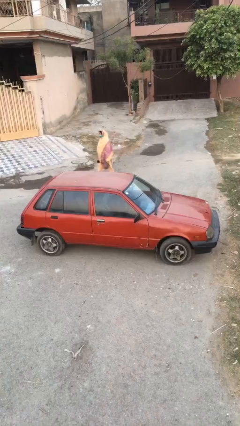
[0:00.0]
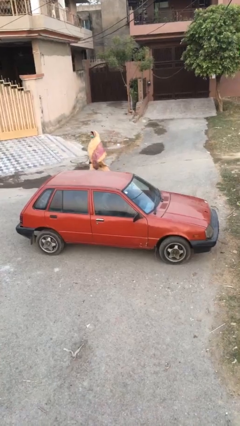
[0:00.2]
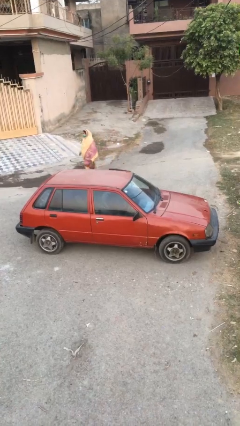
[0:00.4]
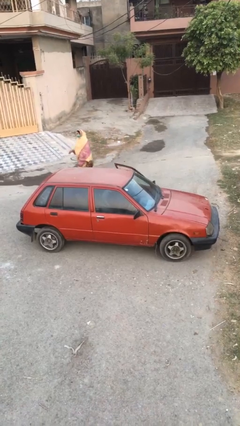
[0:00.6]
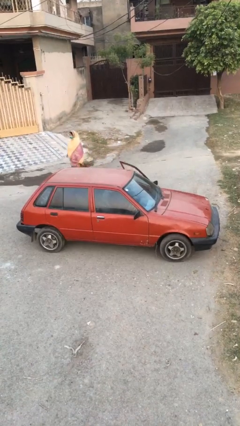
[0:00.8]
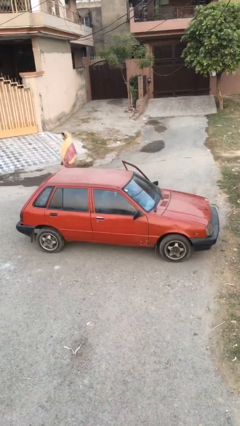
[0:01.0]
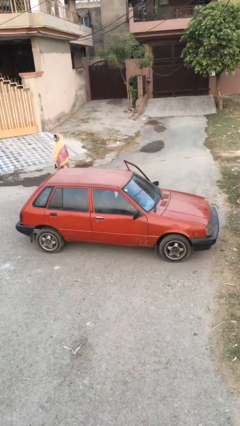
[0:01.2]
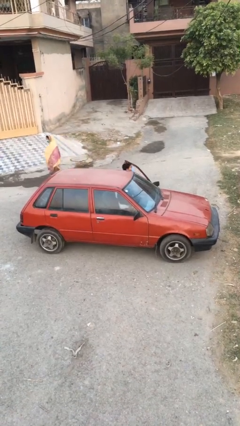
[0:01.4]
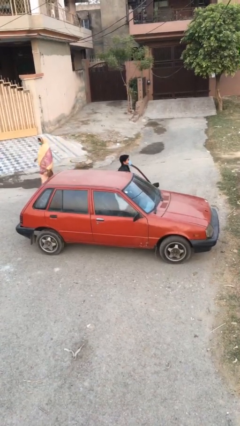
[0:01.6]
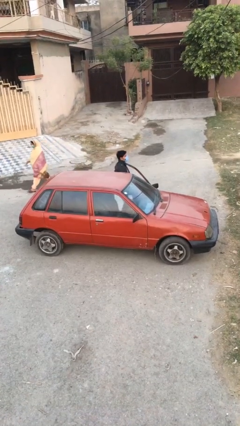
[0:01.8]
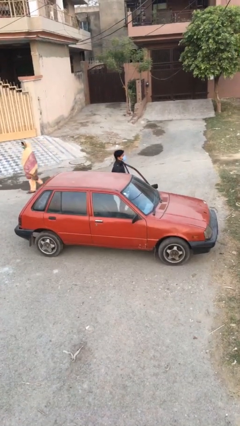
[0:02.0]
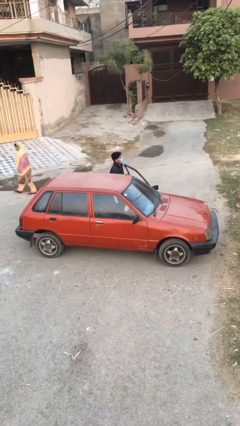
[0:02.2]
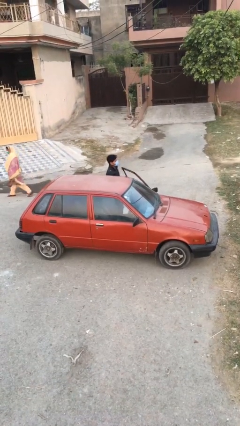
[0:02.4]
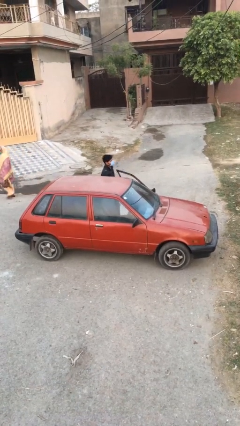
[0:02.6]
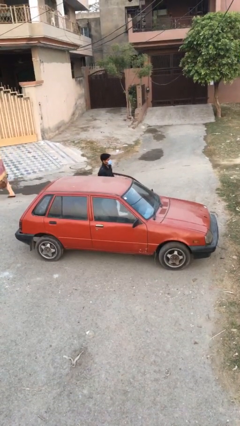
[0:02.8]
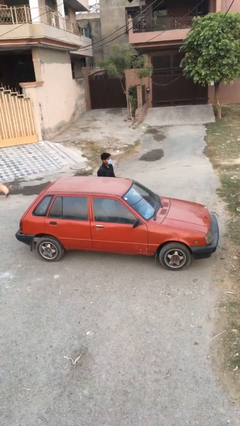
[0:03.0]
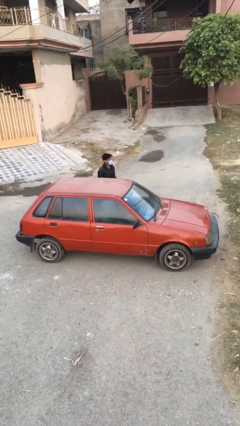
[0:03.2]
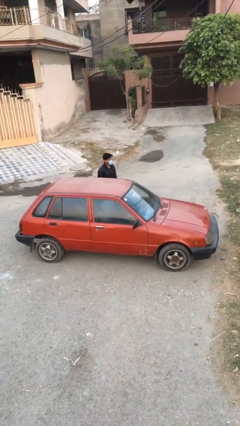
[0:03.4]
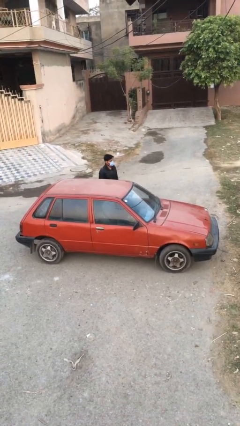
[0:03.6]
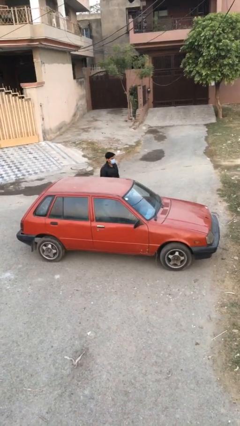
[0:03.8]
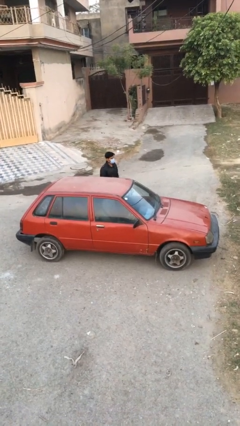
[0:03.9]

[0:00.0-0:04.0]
car drops off person

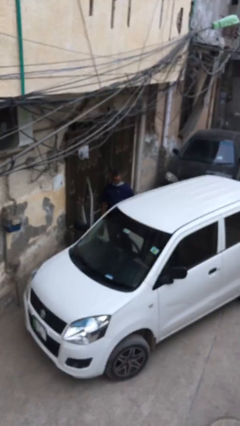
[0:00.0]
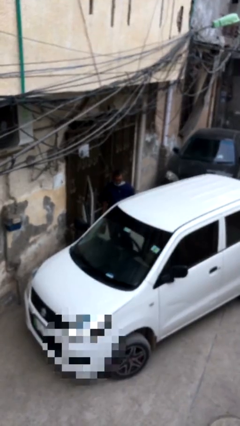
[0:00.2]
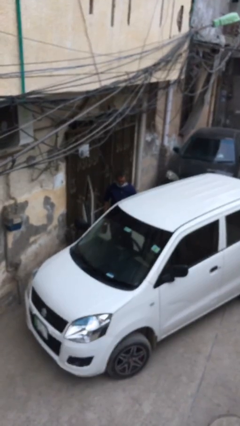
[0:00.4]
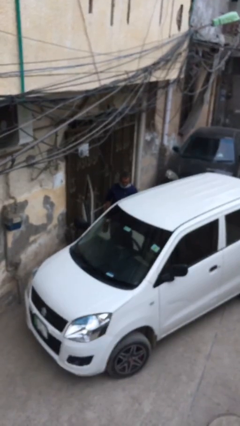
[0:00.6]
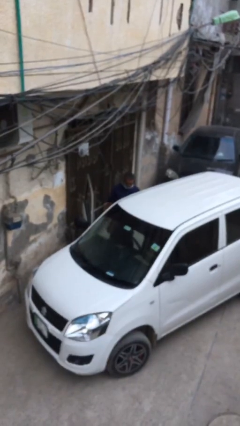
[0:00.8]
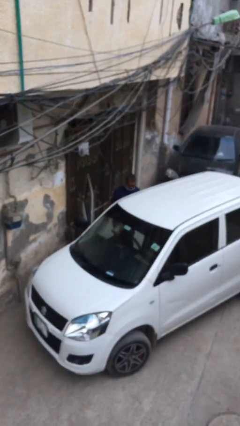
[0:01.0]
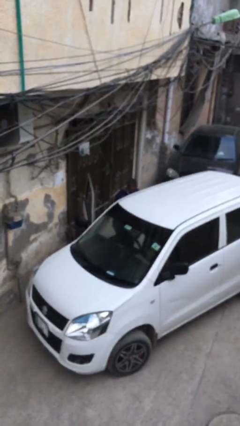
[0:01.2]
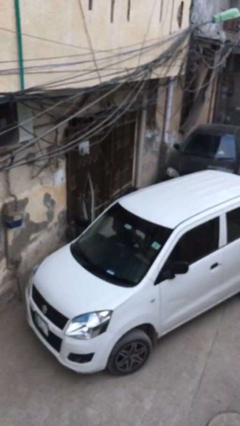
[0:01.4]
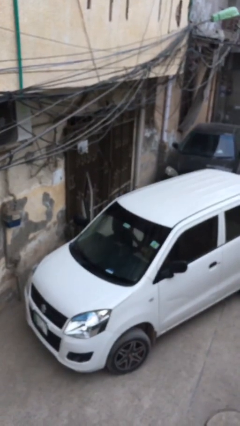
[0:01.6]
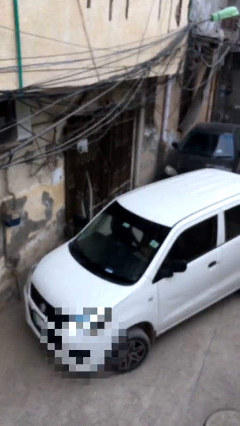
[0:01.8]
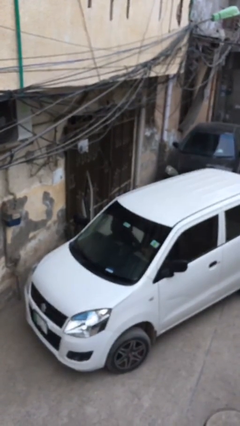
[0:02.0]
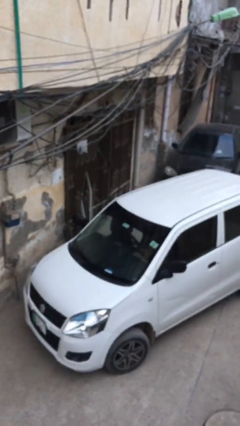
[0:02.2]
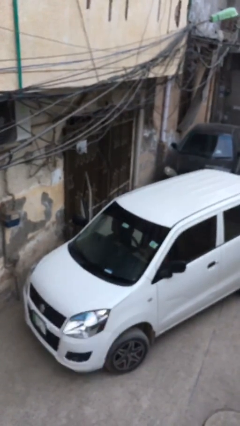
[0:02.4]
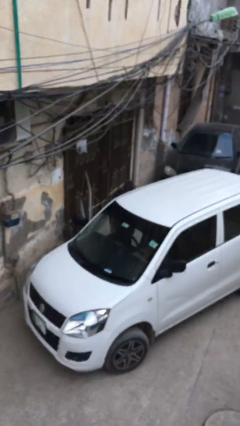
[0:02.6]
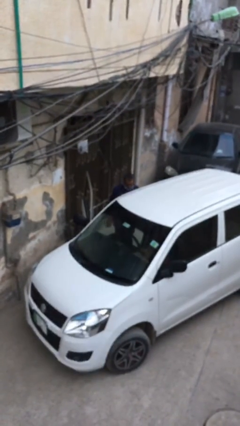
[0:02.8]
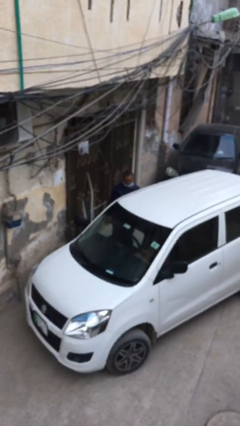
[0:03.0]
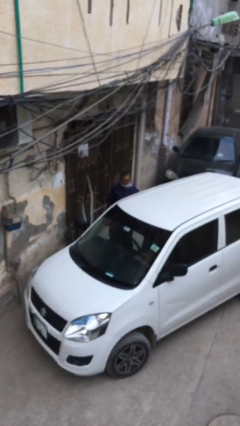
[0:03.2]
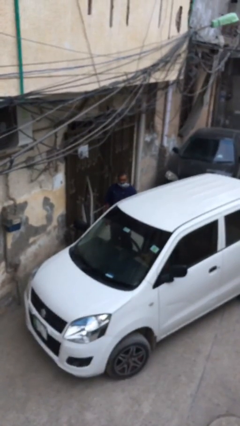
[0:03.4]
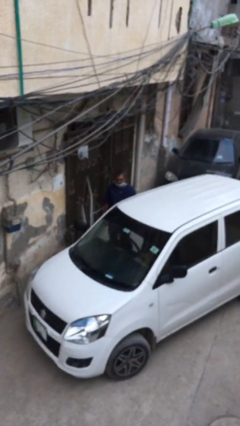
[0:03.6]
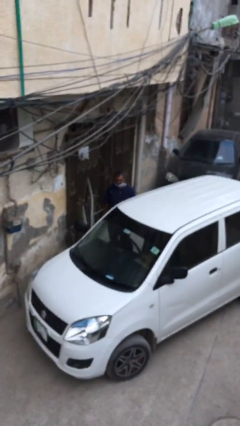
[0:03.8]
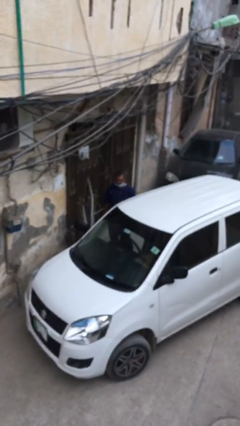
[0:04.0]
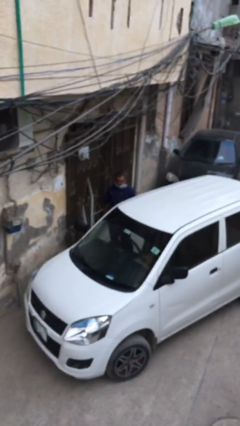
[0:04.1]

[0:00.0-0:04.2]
person loads car

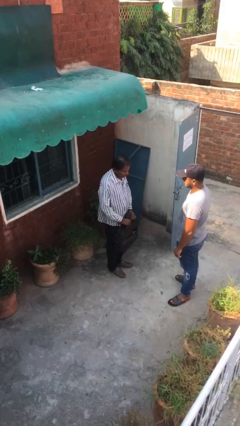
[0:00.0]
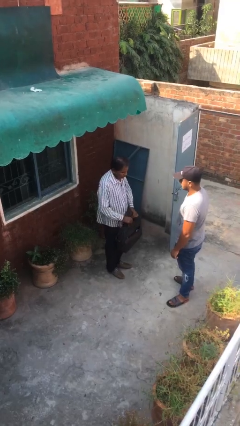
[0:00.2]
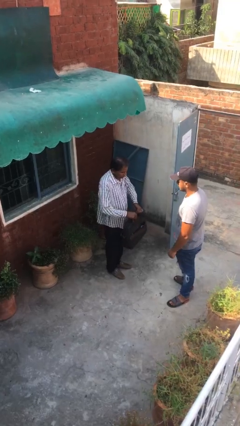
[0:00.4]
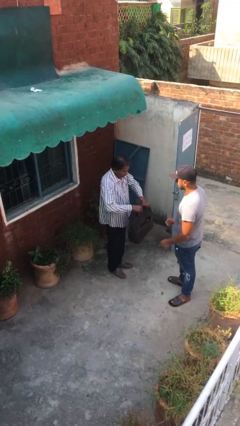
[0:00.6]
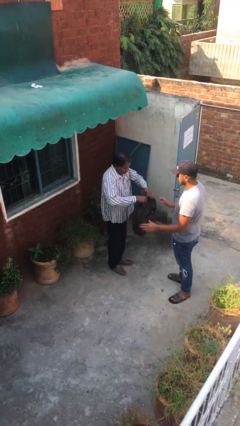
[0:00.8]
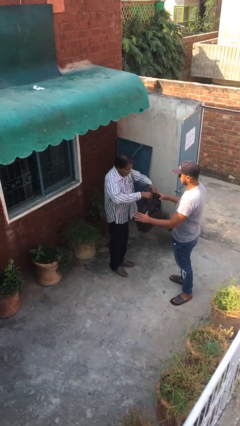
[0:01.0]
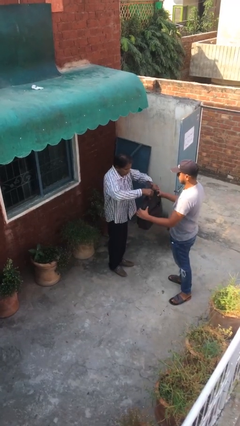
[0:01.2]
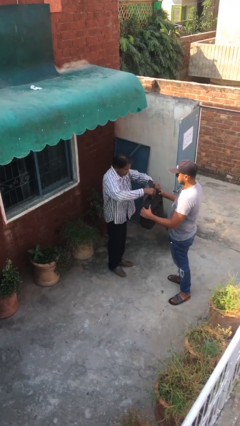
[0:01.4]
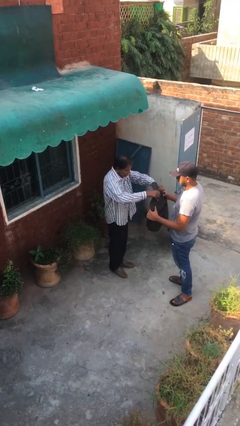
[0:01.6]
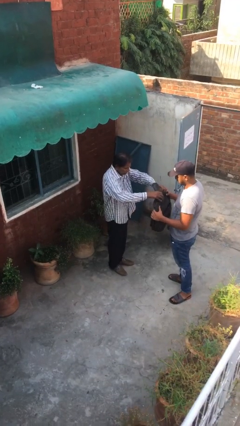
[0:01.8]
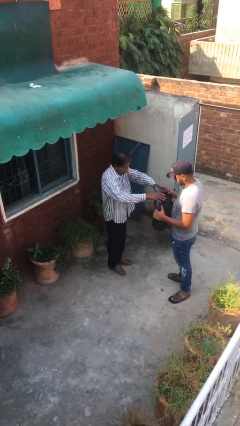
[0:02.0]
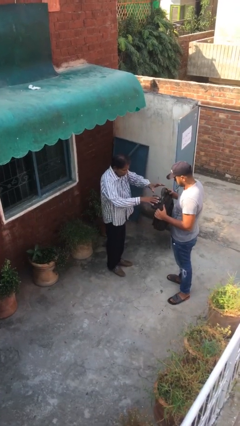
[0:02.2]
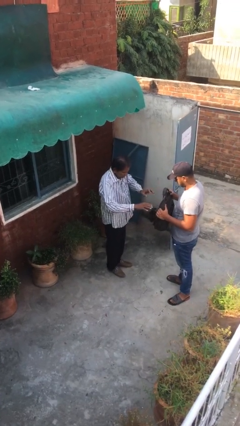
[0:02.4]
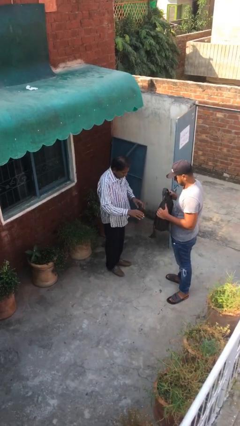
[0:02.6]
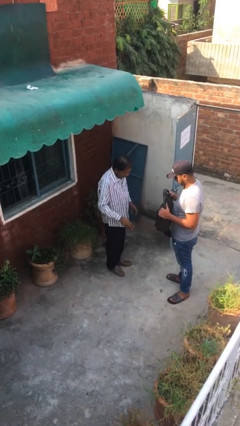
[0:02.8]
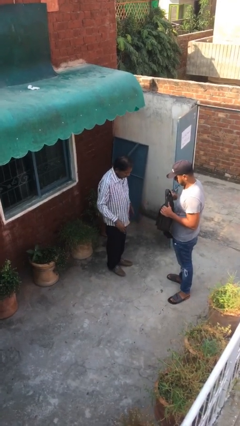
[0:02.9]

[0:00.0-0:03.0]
person transfers object to person

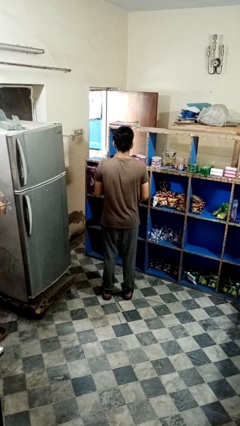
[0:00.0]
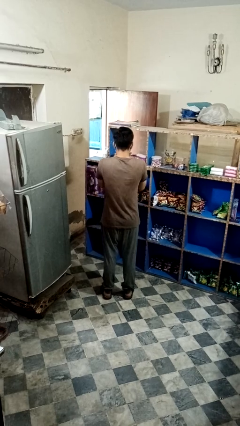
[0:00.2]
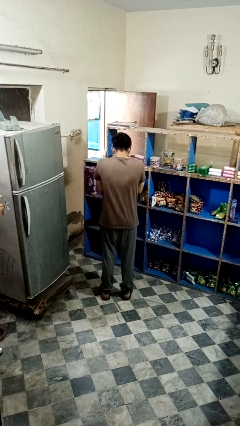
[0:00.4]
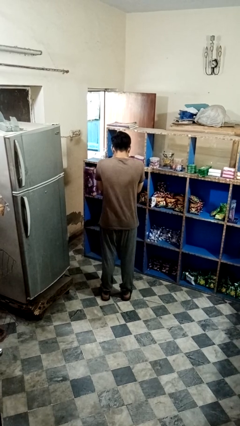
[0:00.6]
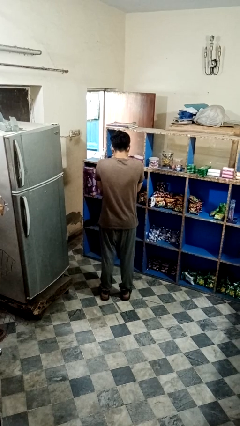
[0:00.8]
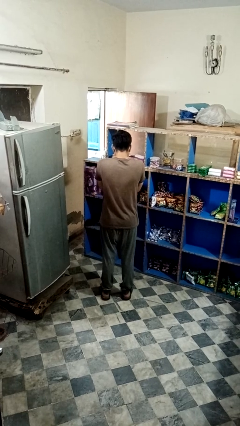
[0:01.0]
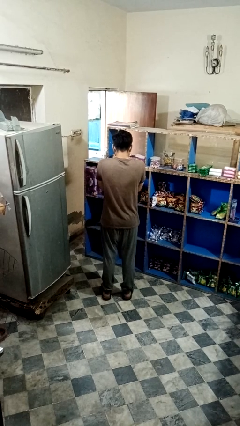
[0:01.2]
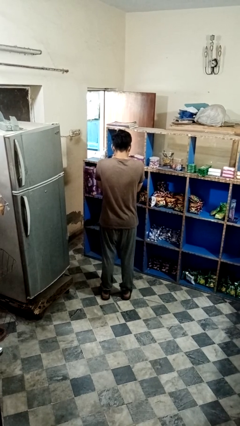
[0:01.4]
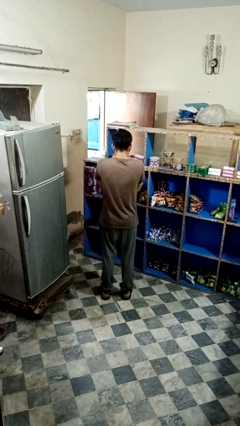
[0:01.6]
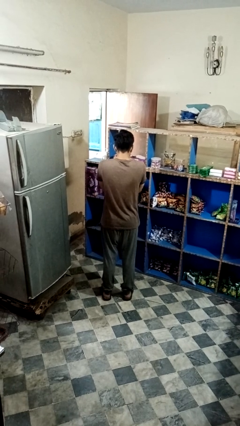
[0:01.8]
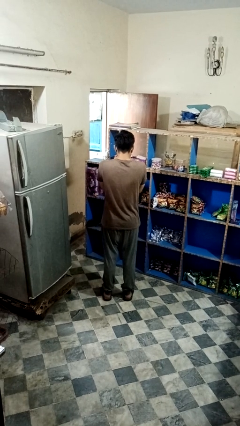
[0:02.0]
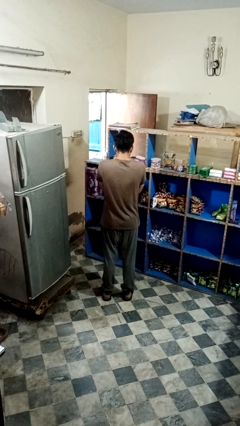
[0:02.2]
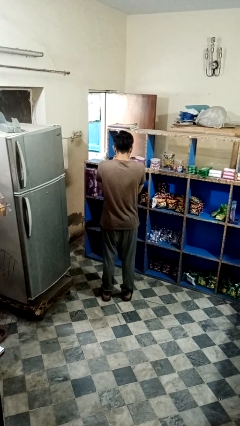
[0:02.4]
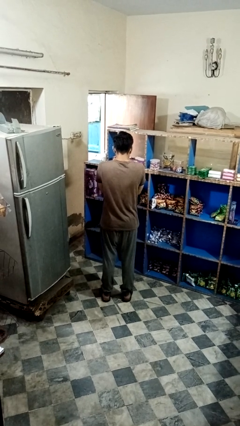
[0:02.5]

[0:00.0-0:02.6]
person sneezes into hand

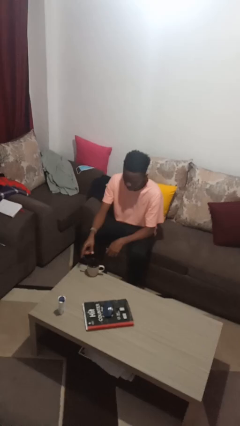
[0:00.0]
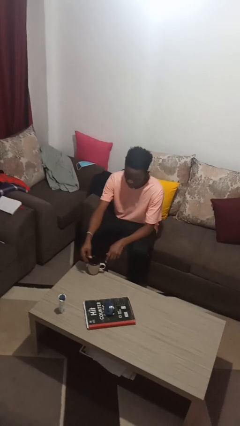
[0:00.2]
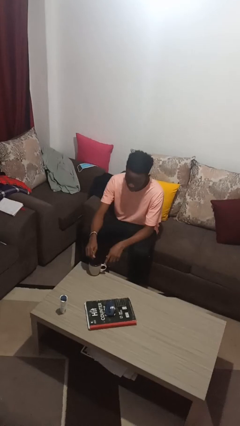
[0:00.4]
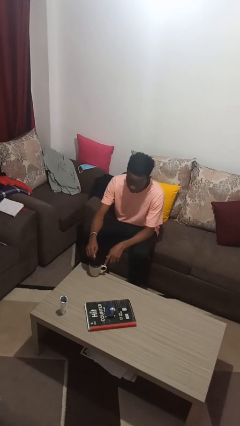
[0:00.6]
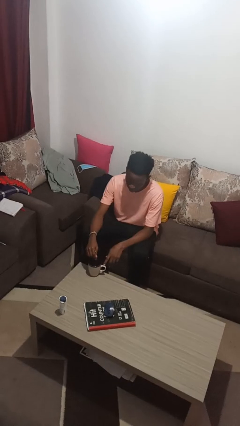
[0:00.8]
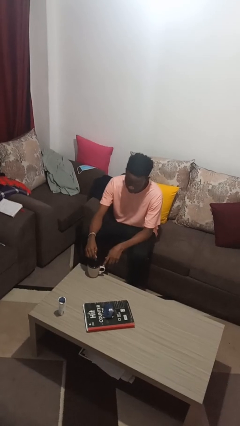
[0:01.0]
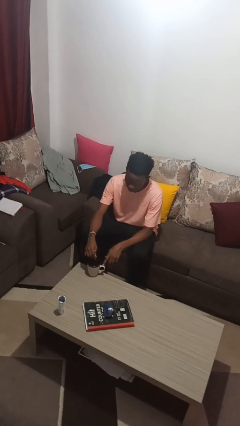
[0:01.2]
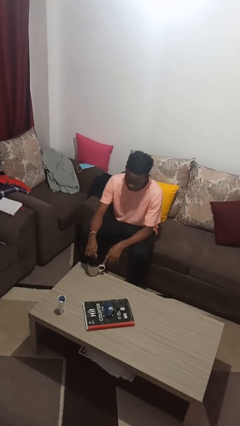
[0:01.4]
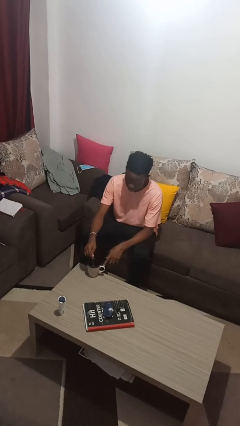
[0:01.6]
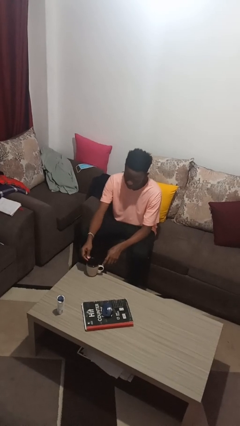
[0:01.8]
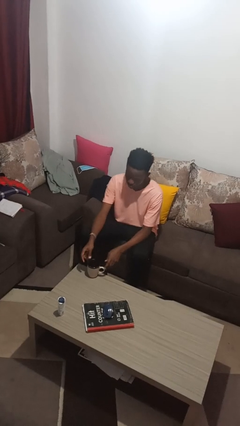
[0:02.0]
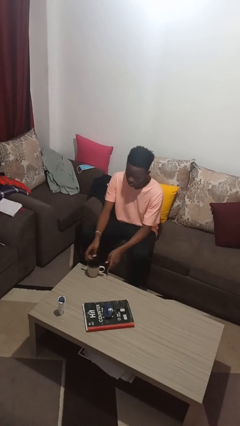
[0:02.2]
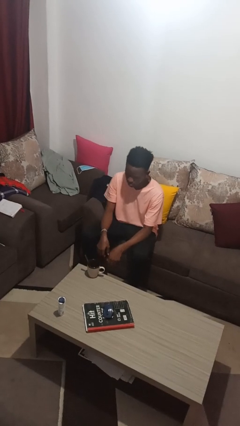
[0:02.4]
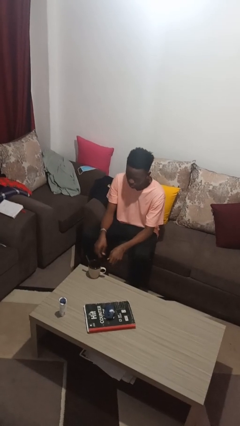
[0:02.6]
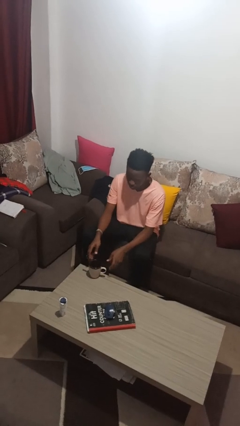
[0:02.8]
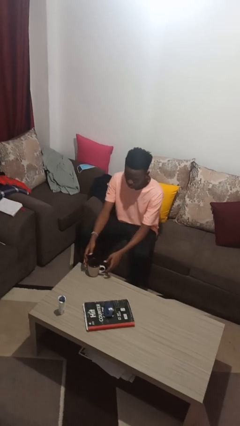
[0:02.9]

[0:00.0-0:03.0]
person stirs mug

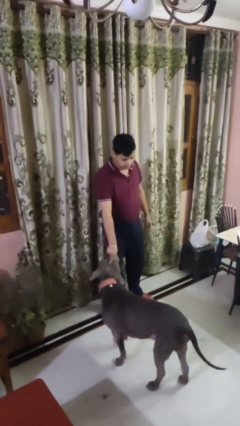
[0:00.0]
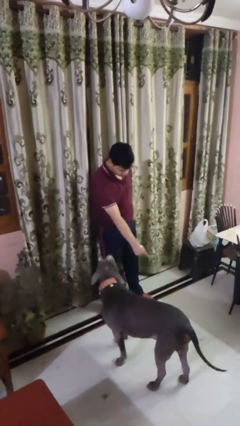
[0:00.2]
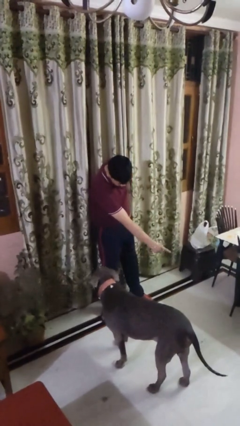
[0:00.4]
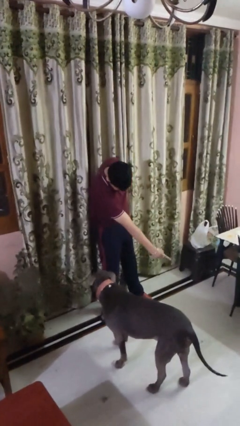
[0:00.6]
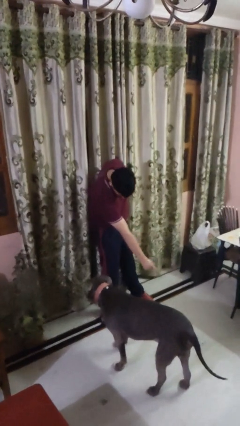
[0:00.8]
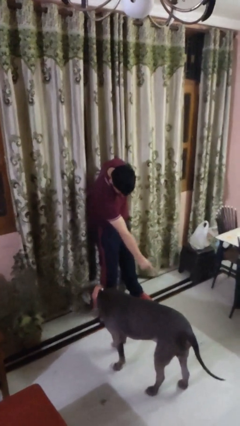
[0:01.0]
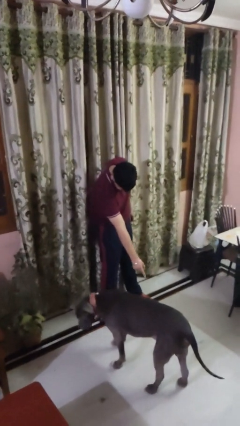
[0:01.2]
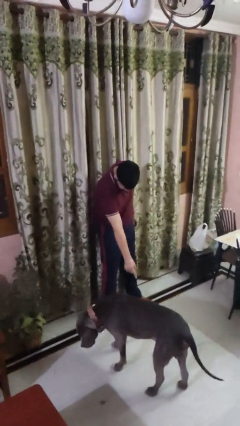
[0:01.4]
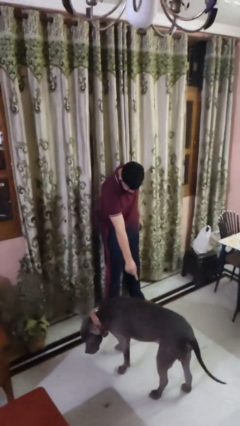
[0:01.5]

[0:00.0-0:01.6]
person points to dog
